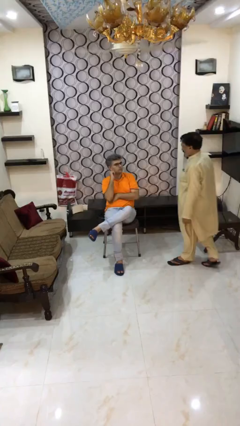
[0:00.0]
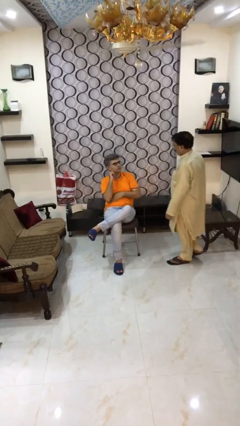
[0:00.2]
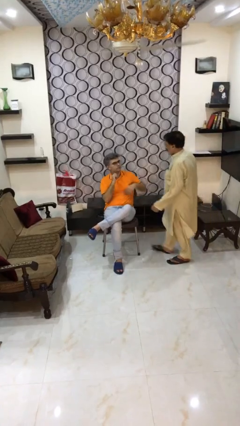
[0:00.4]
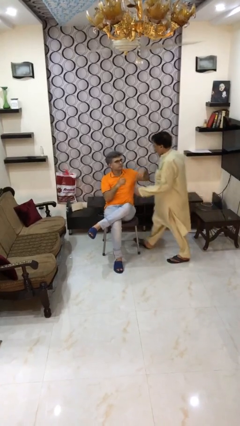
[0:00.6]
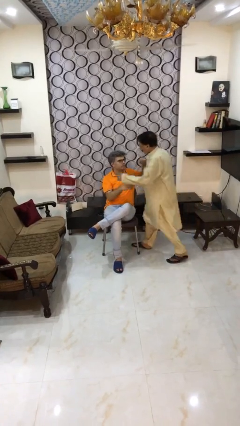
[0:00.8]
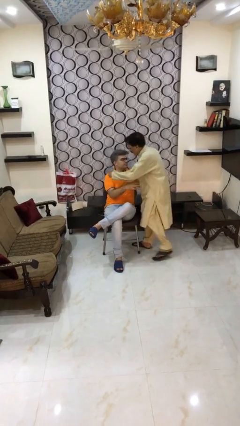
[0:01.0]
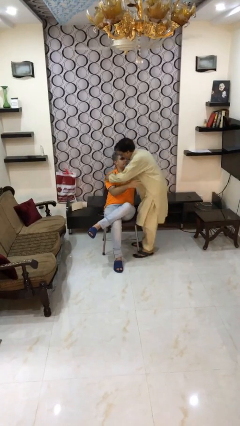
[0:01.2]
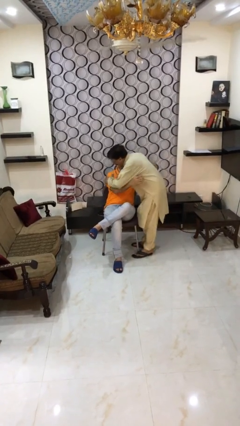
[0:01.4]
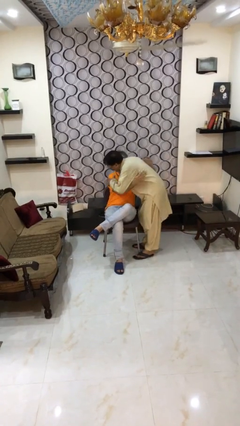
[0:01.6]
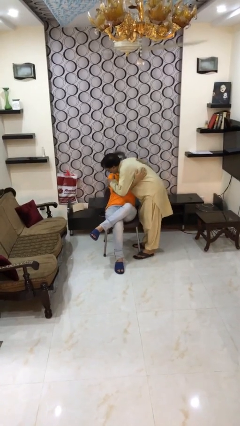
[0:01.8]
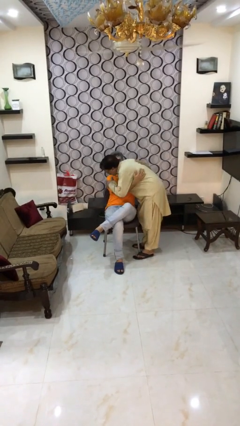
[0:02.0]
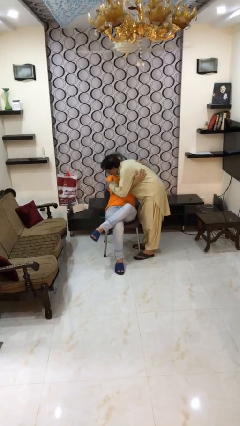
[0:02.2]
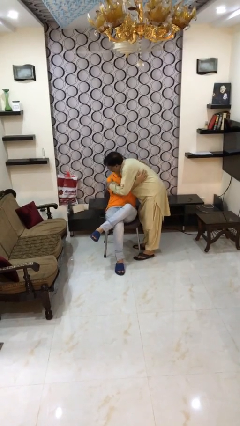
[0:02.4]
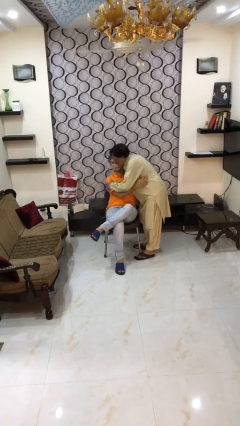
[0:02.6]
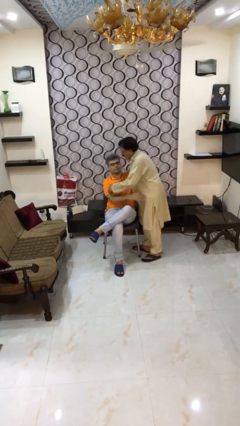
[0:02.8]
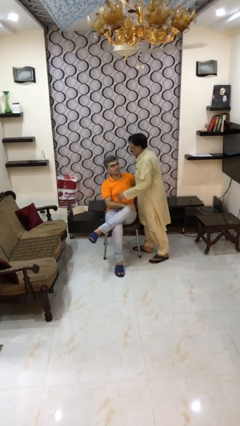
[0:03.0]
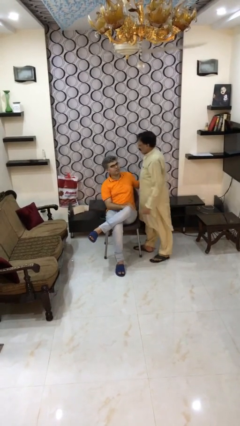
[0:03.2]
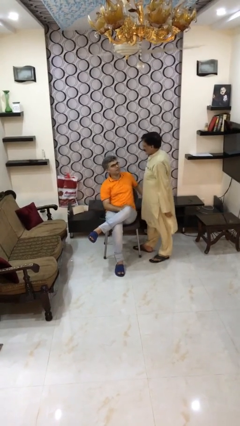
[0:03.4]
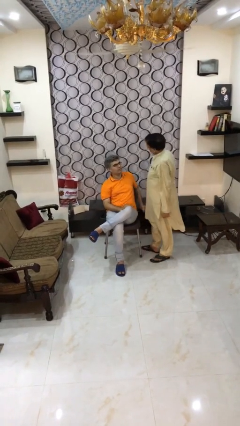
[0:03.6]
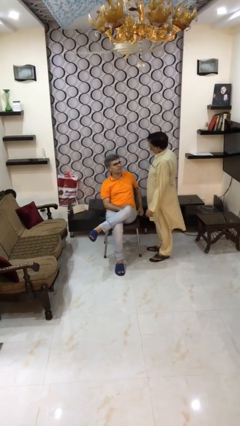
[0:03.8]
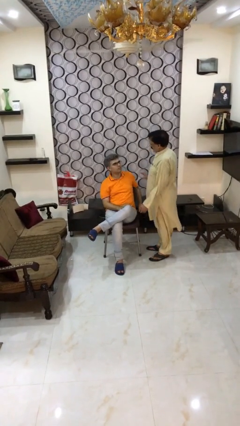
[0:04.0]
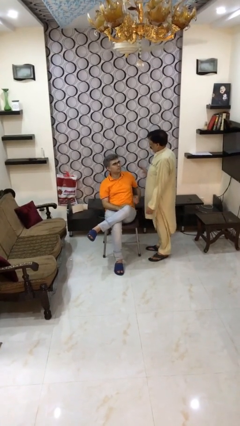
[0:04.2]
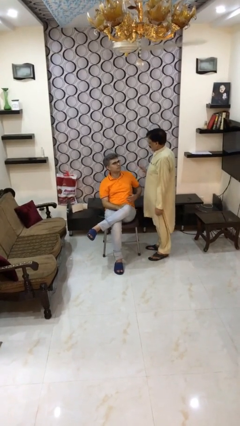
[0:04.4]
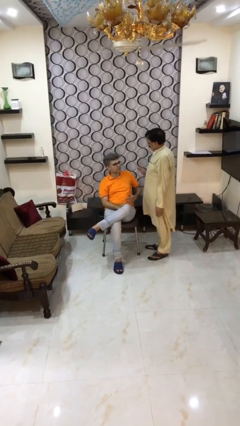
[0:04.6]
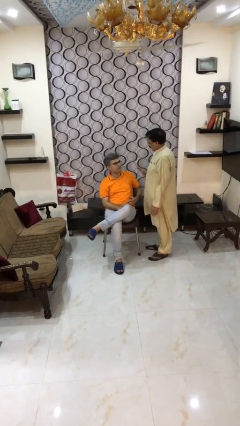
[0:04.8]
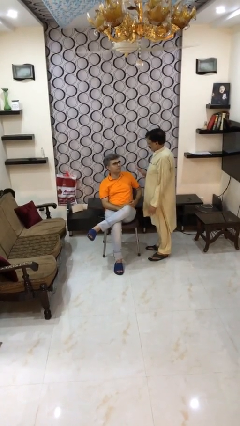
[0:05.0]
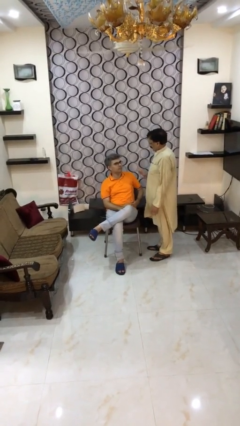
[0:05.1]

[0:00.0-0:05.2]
person embraces person

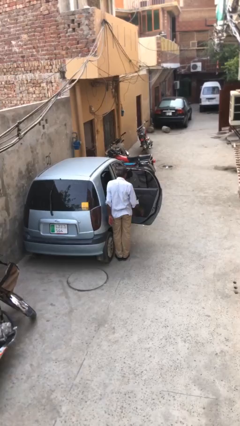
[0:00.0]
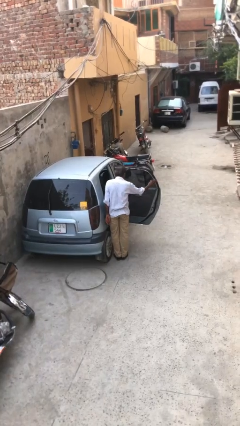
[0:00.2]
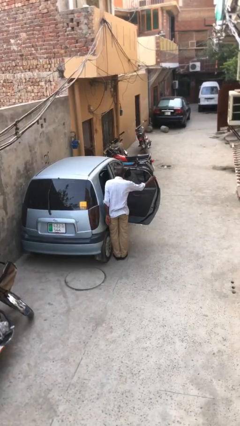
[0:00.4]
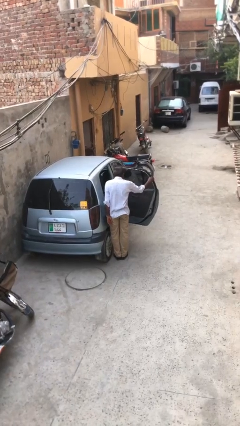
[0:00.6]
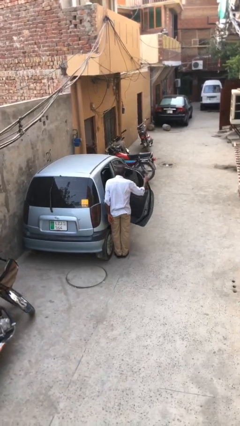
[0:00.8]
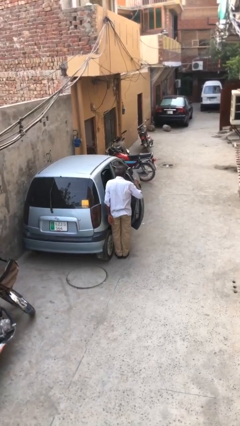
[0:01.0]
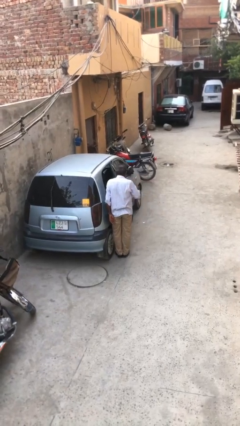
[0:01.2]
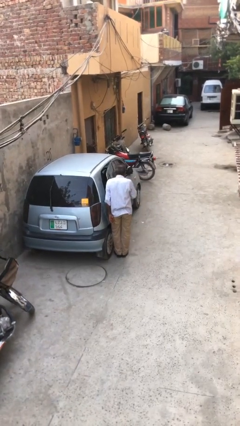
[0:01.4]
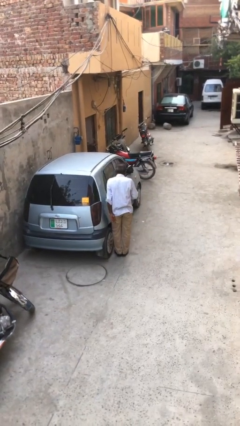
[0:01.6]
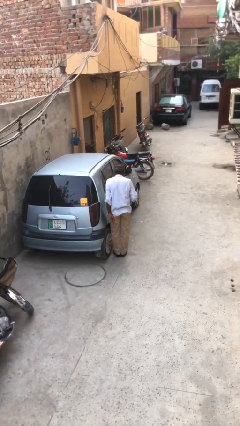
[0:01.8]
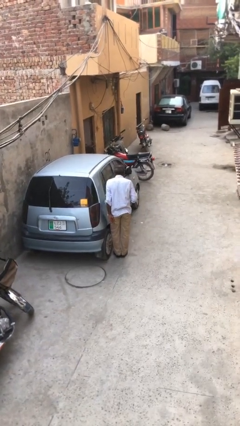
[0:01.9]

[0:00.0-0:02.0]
person closes car door

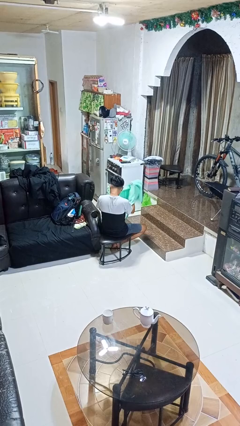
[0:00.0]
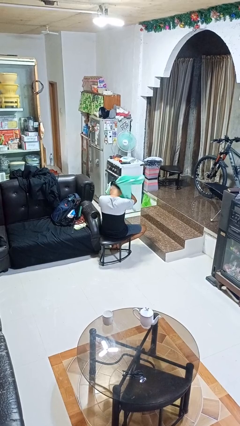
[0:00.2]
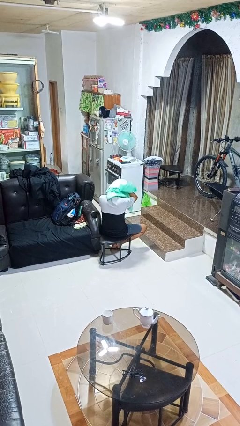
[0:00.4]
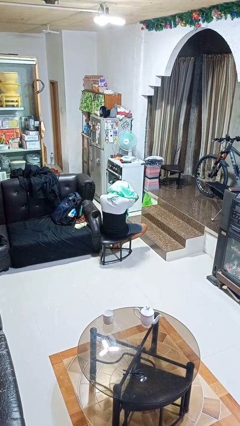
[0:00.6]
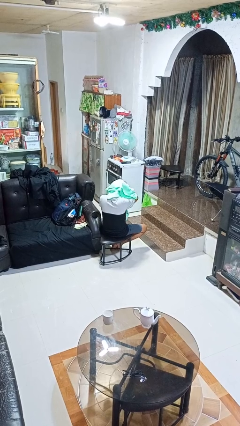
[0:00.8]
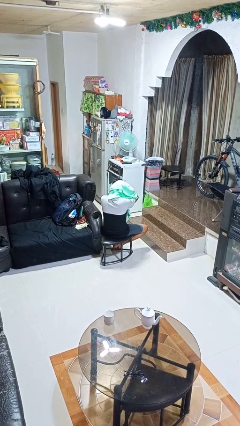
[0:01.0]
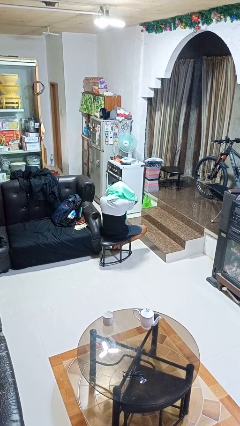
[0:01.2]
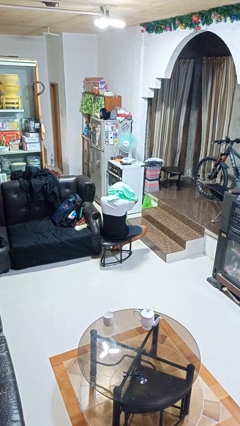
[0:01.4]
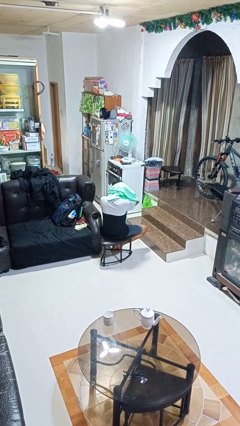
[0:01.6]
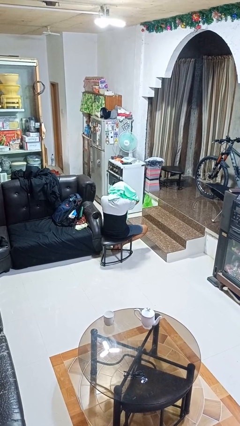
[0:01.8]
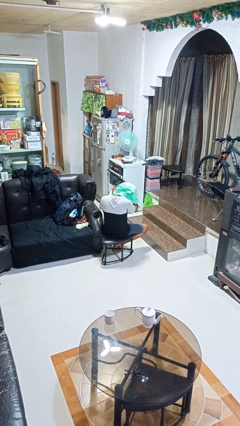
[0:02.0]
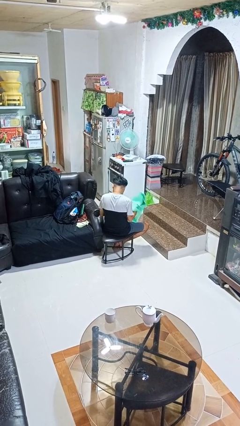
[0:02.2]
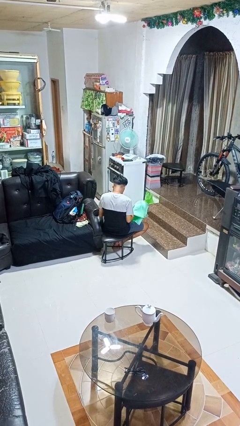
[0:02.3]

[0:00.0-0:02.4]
person dries hair with towel

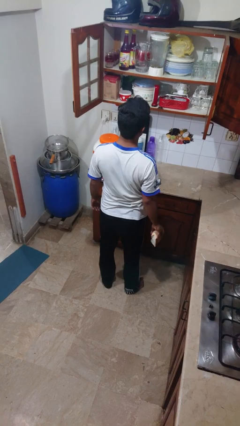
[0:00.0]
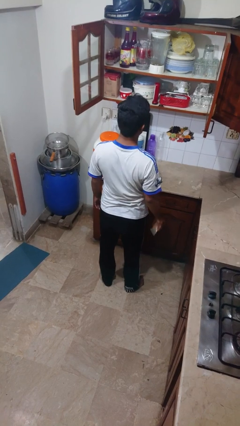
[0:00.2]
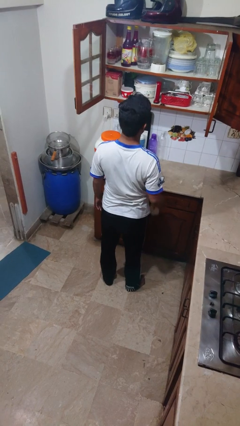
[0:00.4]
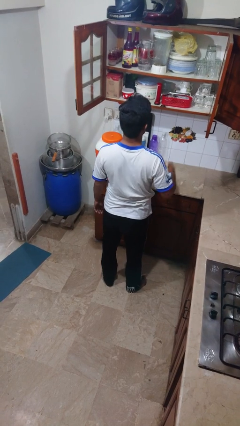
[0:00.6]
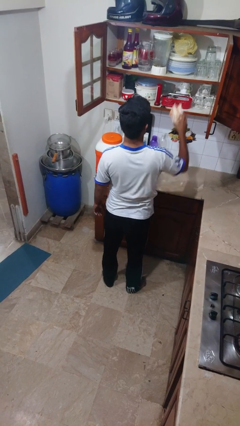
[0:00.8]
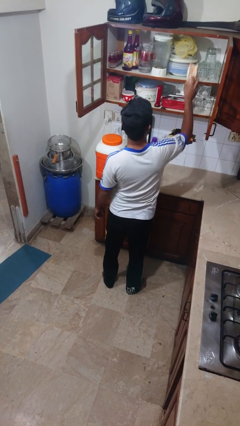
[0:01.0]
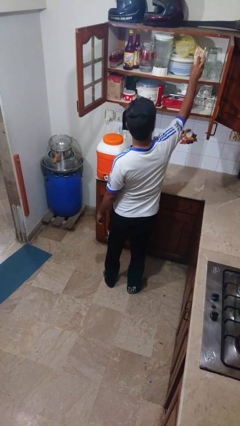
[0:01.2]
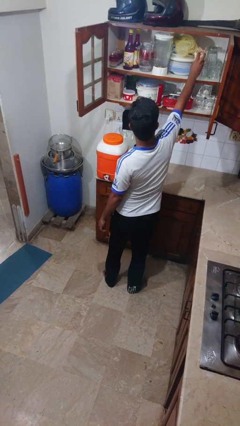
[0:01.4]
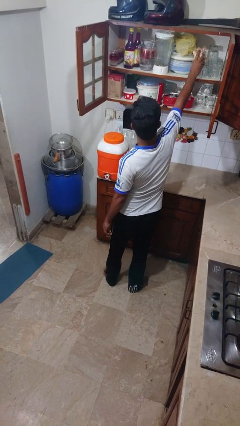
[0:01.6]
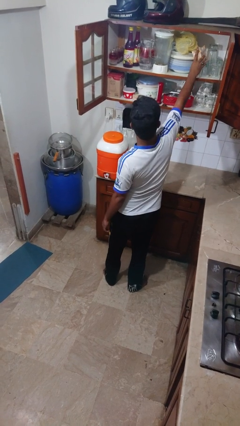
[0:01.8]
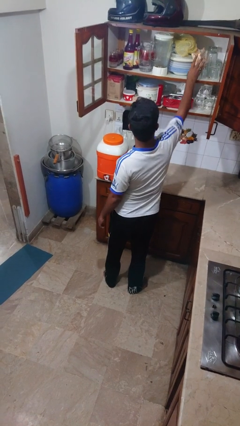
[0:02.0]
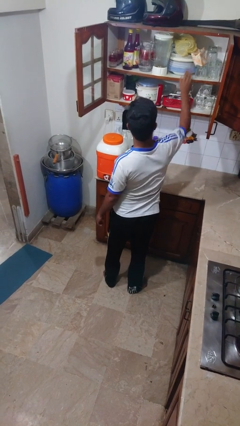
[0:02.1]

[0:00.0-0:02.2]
person puts down object into cabinet

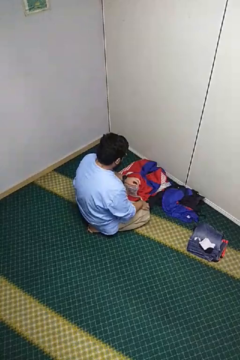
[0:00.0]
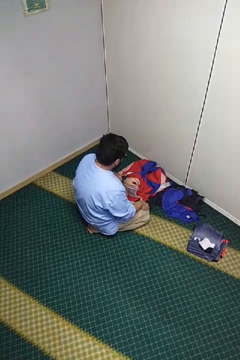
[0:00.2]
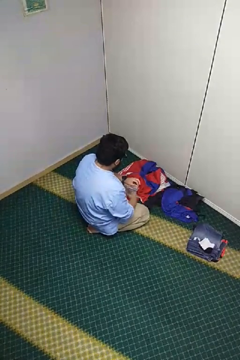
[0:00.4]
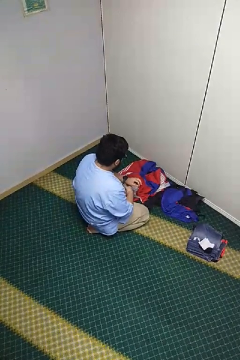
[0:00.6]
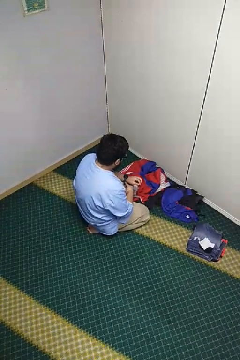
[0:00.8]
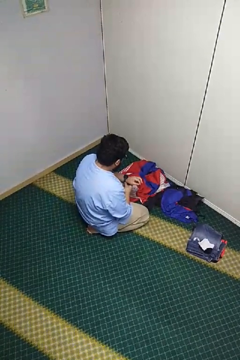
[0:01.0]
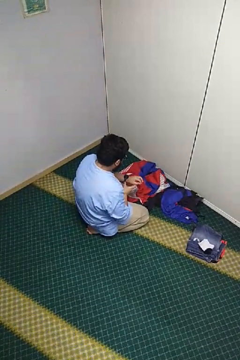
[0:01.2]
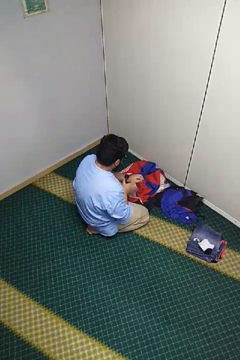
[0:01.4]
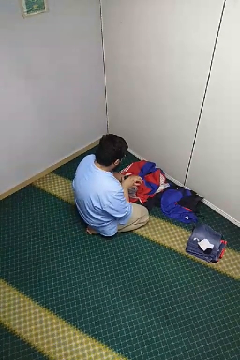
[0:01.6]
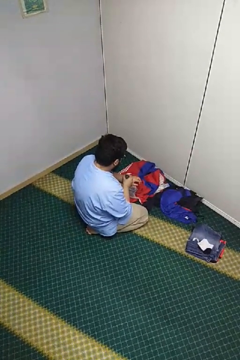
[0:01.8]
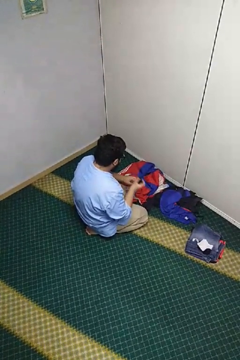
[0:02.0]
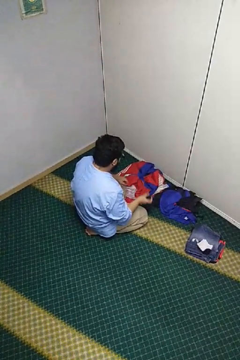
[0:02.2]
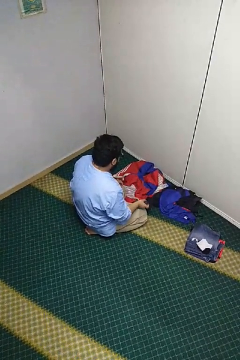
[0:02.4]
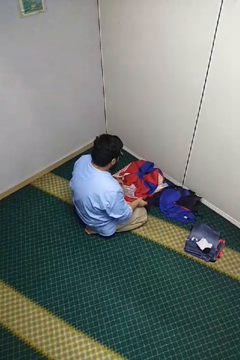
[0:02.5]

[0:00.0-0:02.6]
person takes off wristwatch

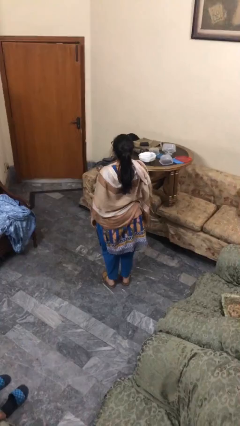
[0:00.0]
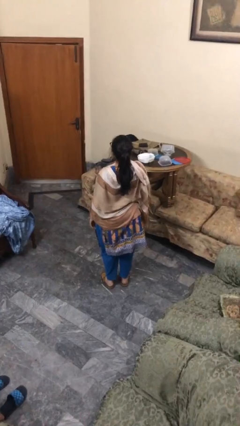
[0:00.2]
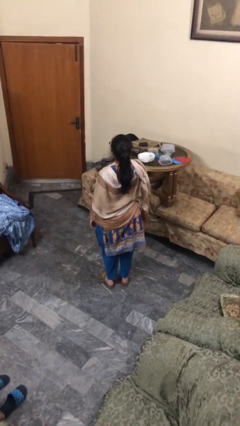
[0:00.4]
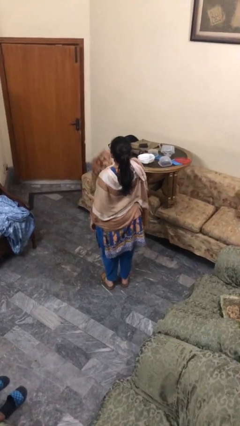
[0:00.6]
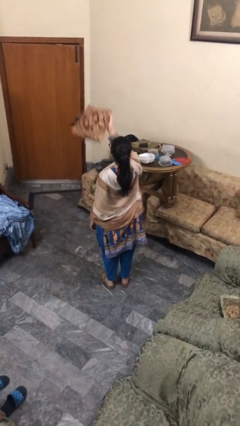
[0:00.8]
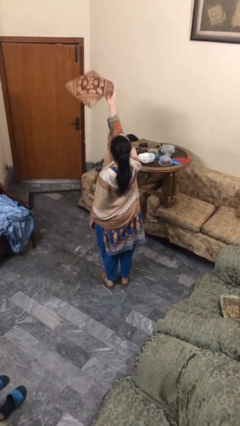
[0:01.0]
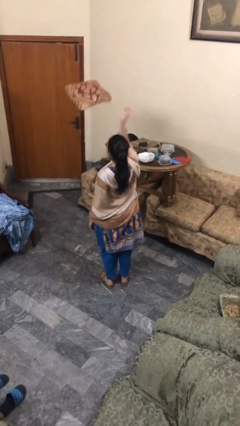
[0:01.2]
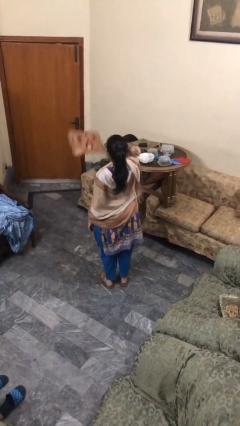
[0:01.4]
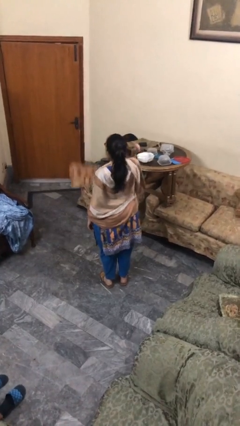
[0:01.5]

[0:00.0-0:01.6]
person drops object

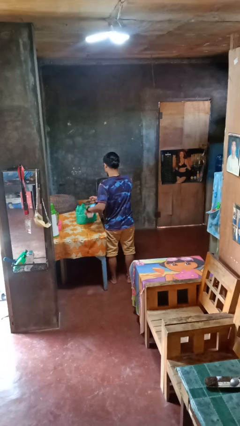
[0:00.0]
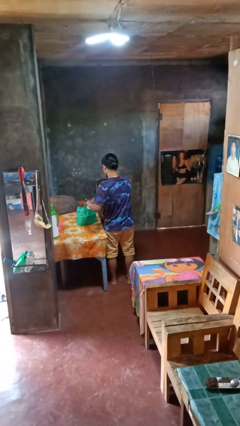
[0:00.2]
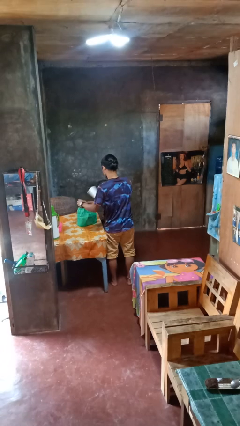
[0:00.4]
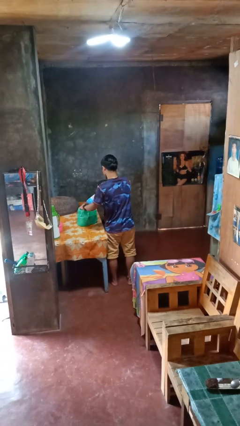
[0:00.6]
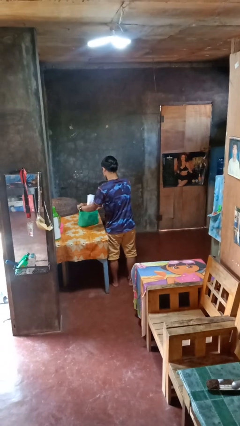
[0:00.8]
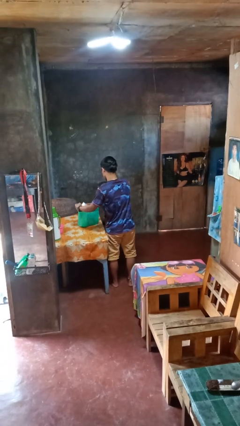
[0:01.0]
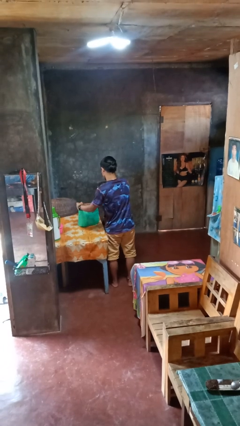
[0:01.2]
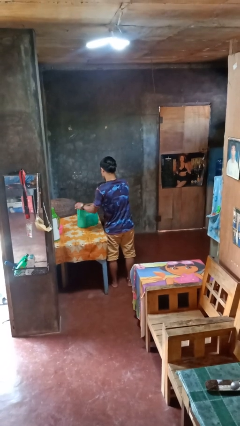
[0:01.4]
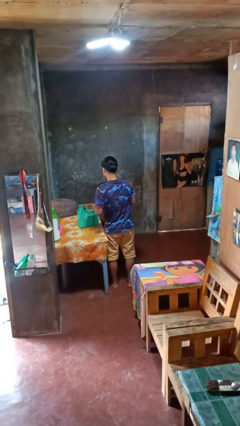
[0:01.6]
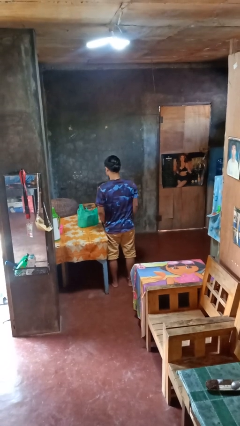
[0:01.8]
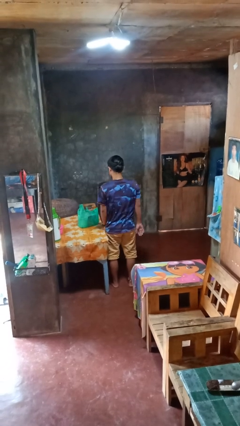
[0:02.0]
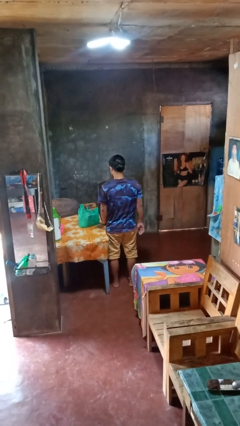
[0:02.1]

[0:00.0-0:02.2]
person puts object into bag
